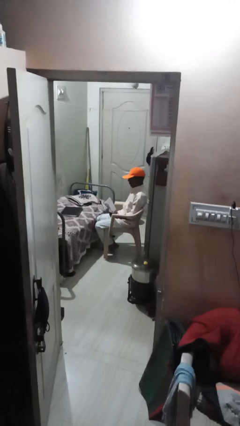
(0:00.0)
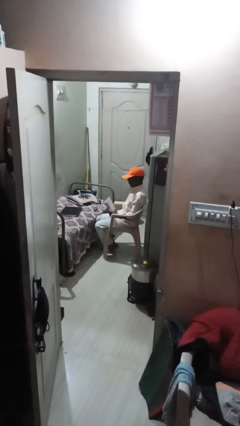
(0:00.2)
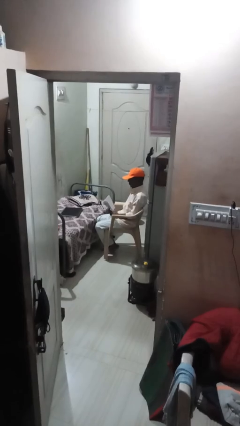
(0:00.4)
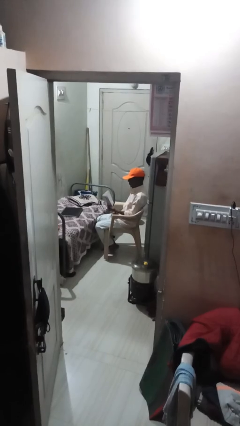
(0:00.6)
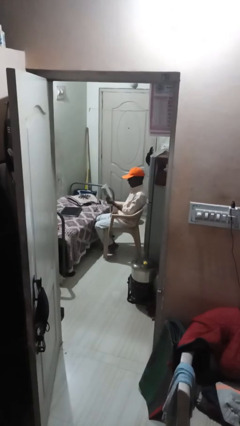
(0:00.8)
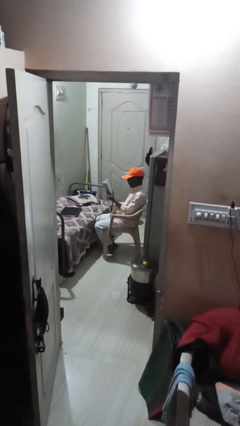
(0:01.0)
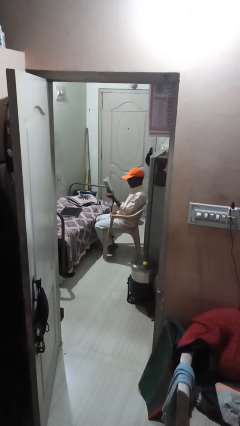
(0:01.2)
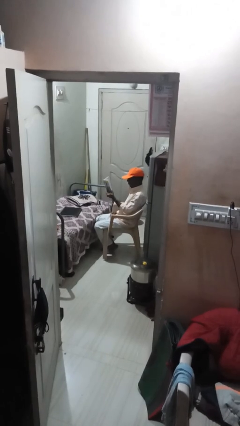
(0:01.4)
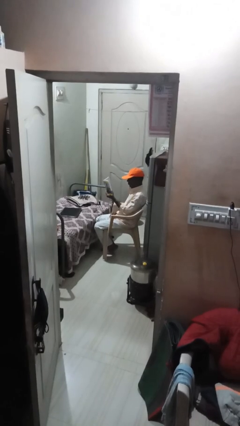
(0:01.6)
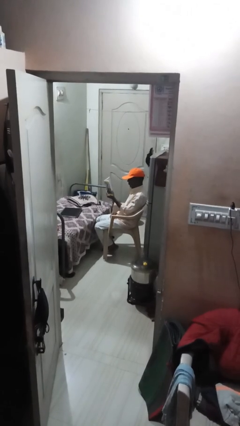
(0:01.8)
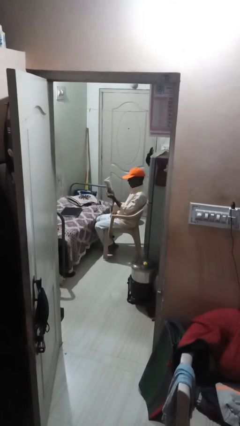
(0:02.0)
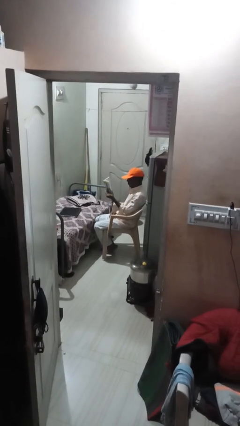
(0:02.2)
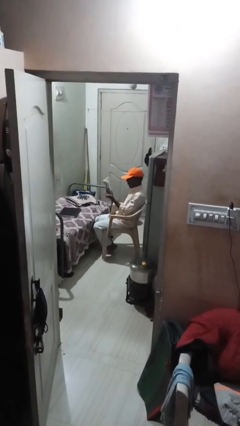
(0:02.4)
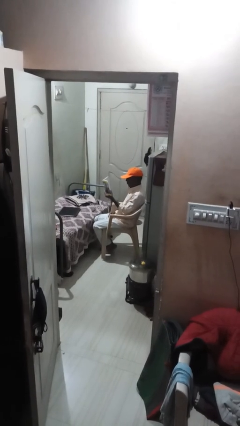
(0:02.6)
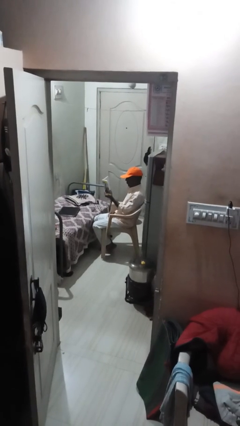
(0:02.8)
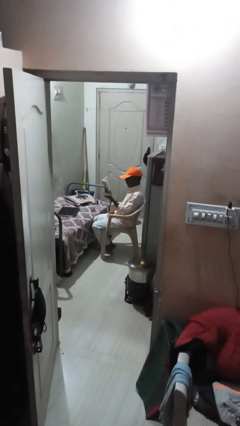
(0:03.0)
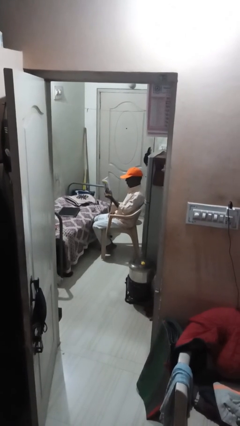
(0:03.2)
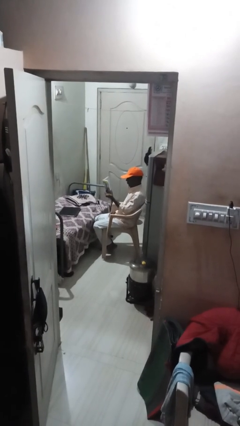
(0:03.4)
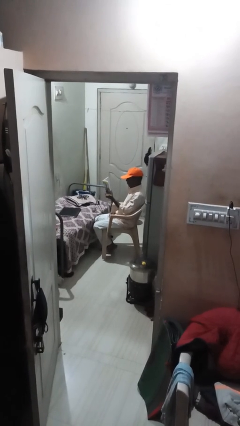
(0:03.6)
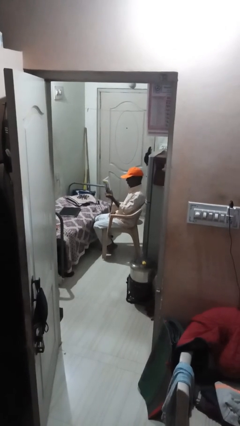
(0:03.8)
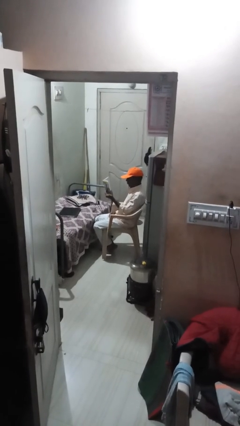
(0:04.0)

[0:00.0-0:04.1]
person reads document

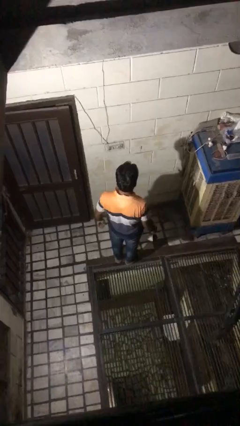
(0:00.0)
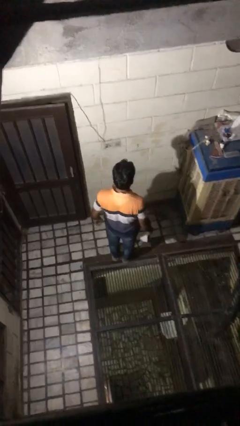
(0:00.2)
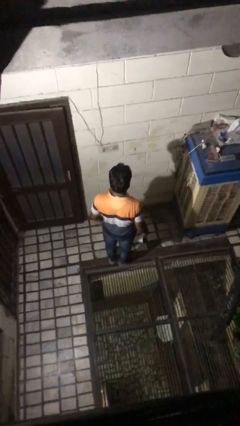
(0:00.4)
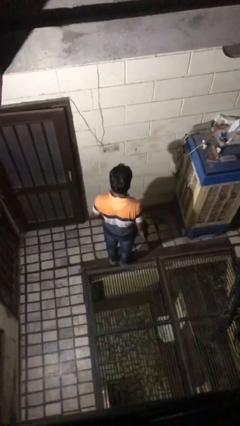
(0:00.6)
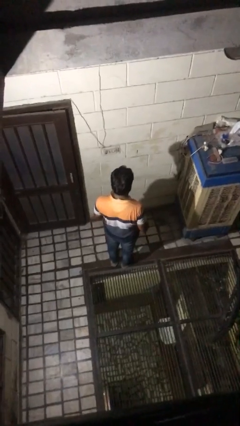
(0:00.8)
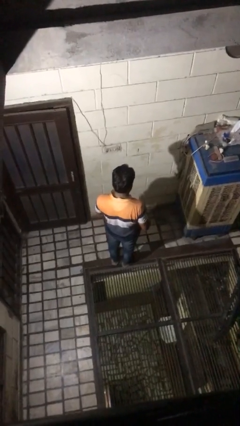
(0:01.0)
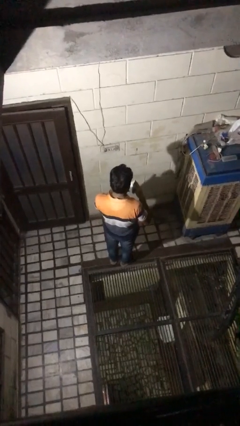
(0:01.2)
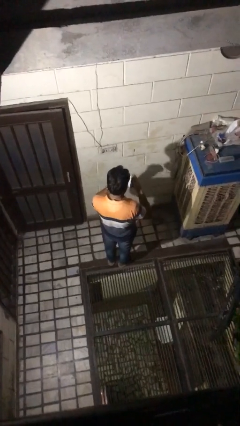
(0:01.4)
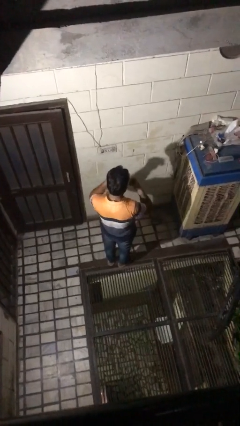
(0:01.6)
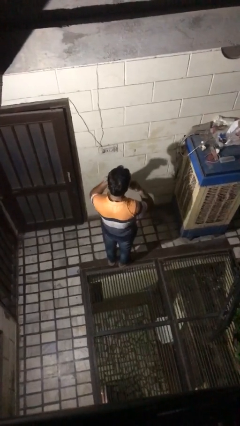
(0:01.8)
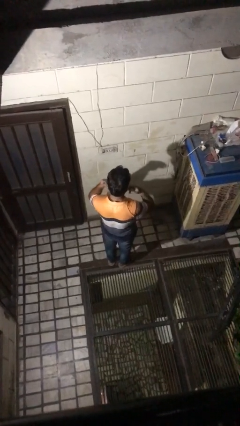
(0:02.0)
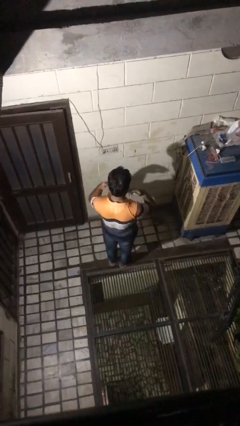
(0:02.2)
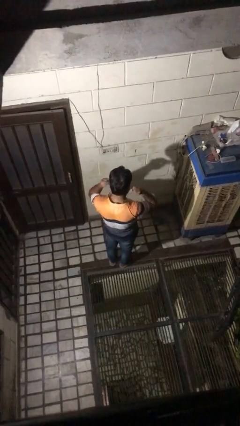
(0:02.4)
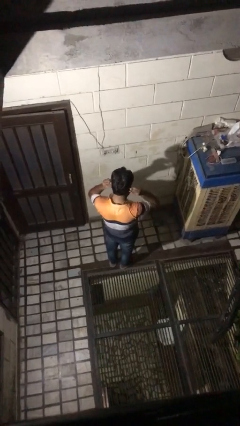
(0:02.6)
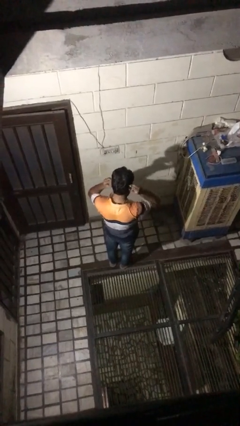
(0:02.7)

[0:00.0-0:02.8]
person puts on facemask

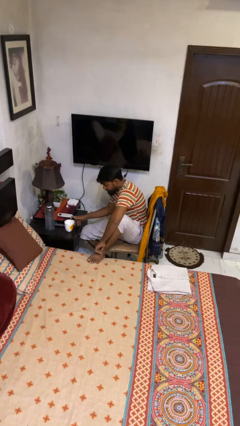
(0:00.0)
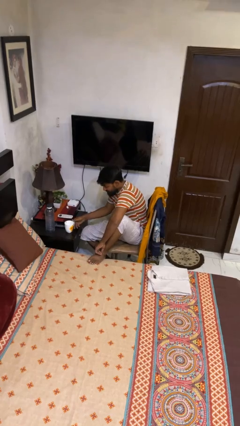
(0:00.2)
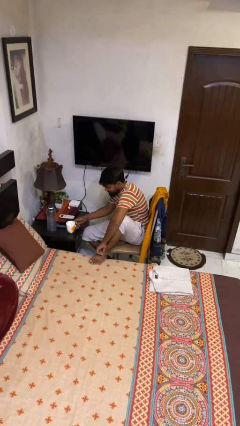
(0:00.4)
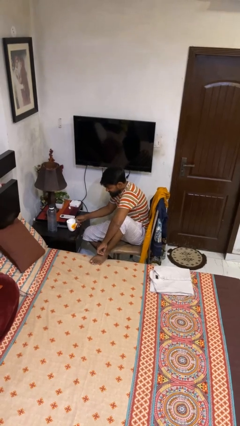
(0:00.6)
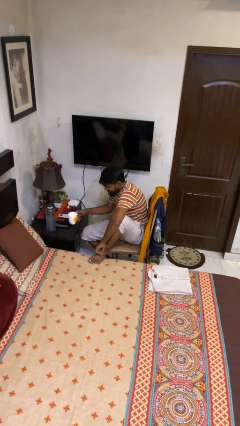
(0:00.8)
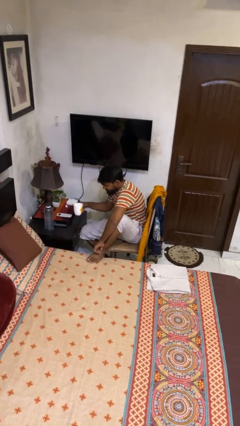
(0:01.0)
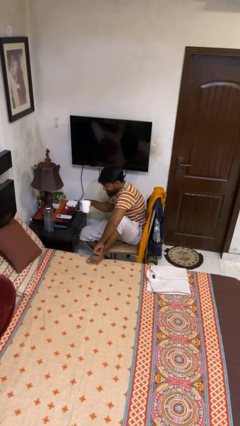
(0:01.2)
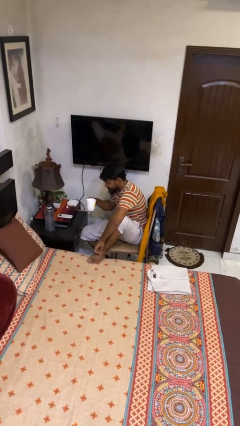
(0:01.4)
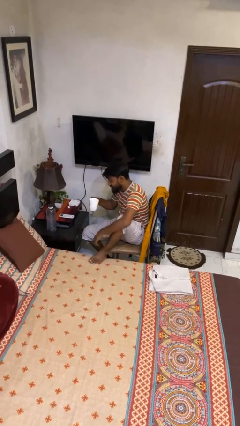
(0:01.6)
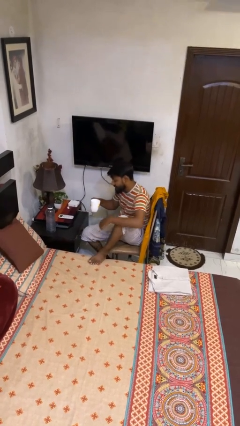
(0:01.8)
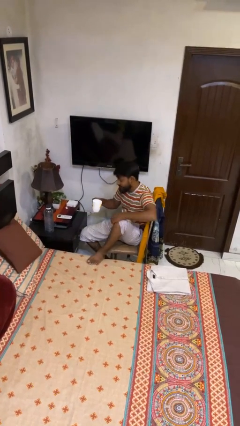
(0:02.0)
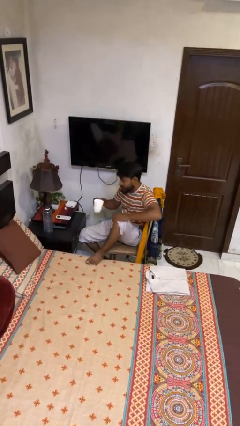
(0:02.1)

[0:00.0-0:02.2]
person picks up object from table

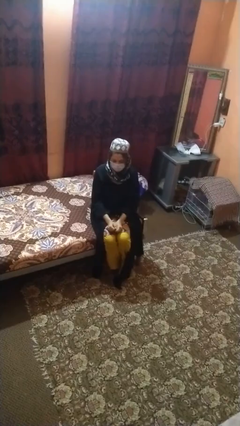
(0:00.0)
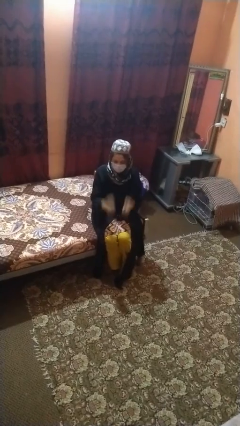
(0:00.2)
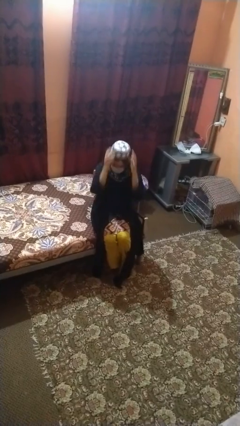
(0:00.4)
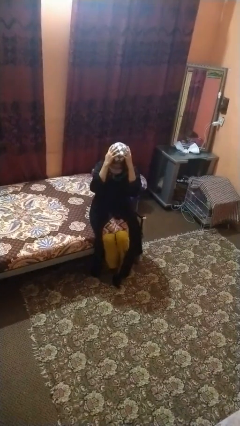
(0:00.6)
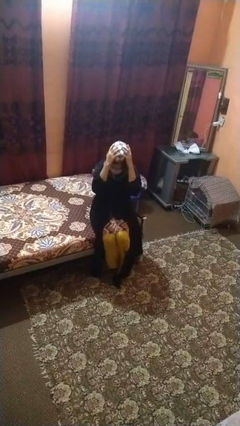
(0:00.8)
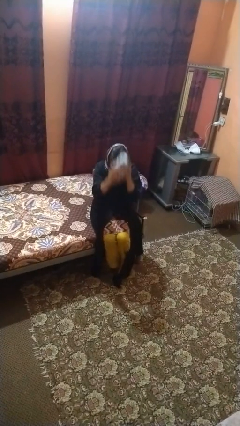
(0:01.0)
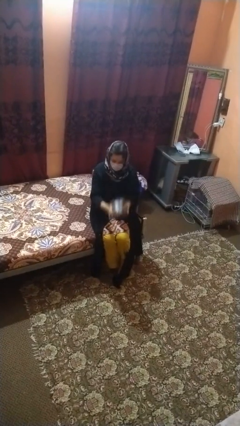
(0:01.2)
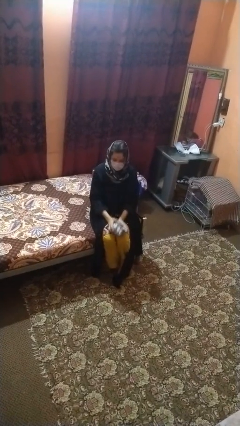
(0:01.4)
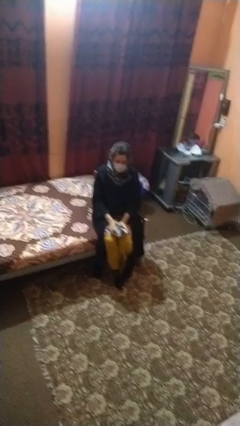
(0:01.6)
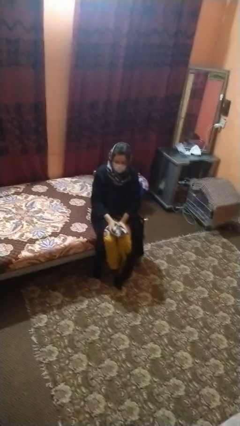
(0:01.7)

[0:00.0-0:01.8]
person takes off hat

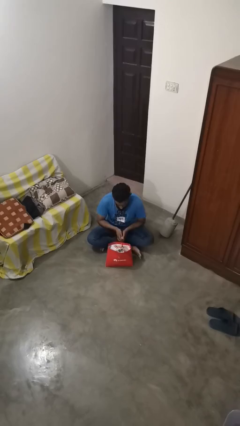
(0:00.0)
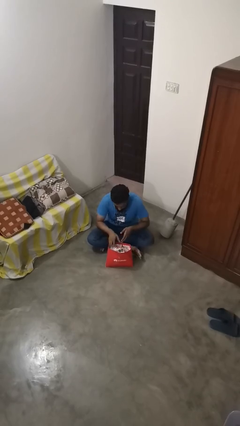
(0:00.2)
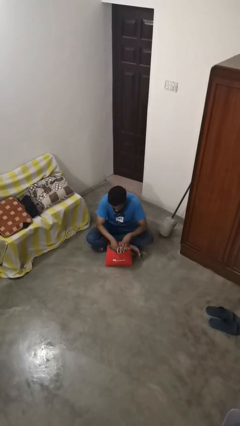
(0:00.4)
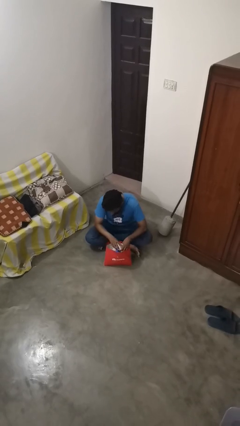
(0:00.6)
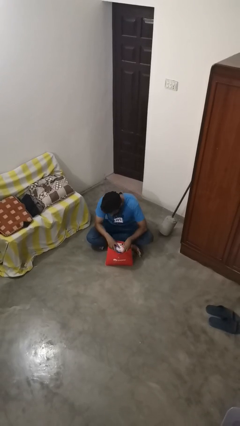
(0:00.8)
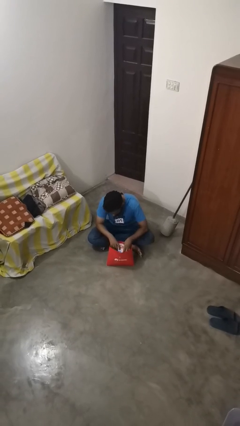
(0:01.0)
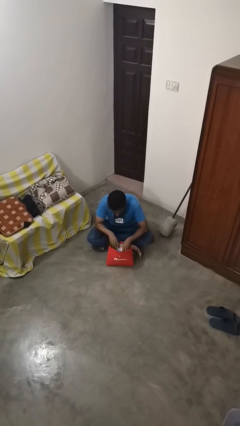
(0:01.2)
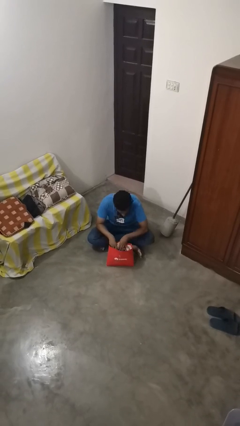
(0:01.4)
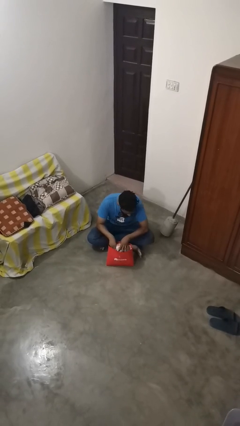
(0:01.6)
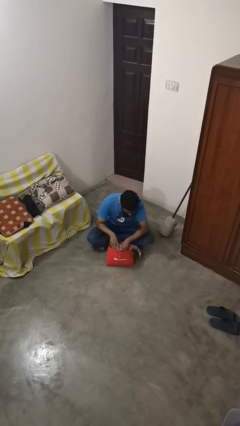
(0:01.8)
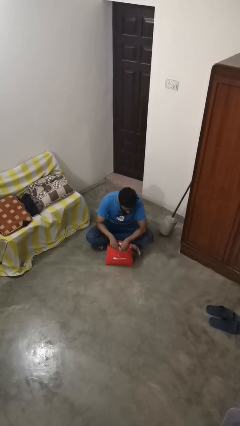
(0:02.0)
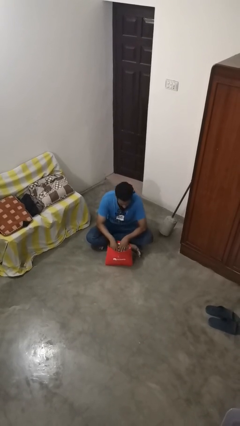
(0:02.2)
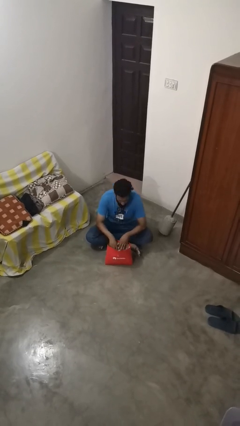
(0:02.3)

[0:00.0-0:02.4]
person searches in bag

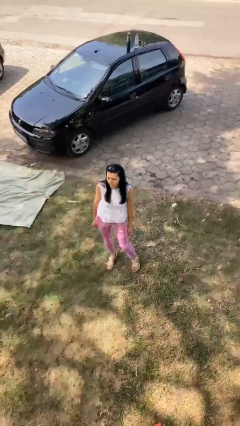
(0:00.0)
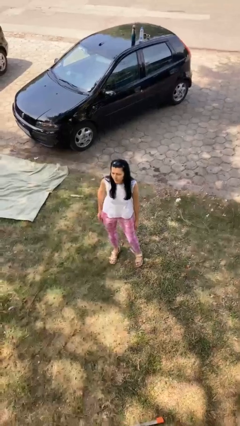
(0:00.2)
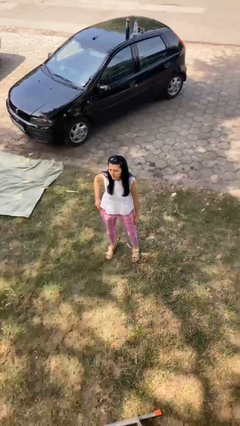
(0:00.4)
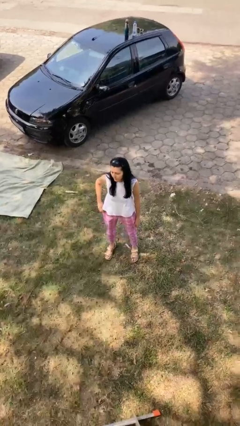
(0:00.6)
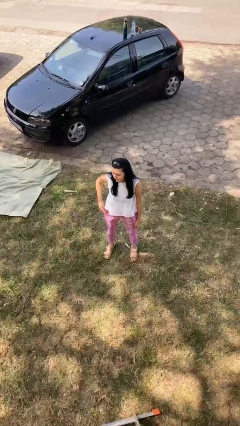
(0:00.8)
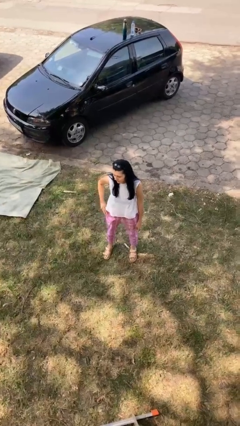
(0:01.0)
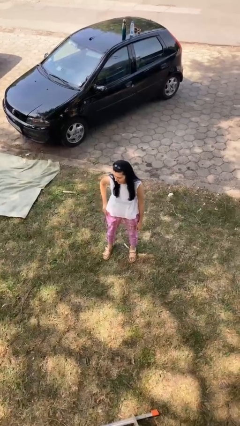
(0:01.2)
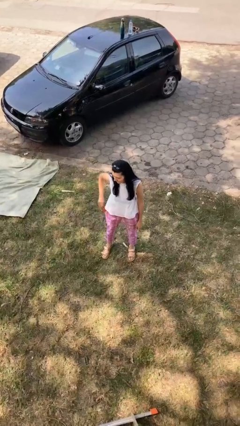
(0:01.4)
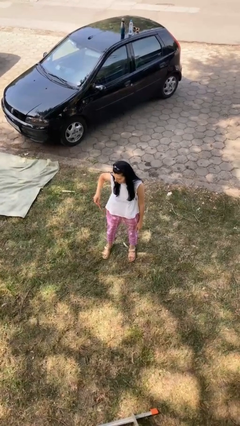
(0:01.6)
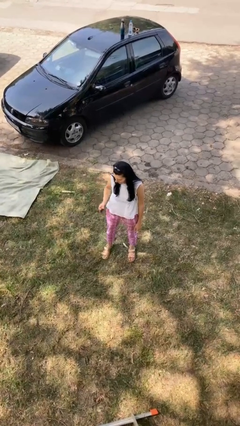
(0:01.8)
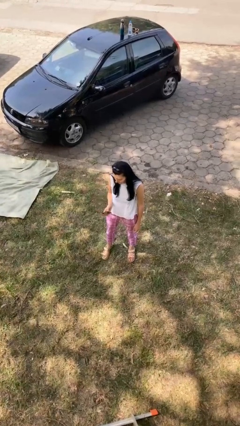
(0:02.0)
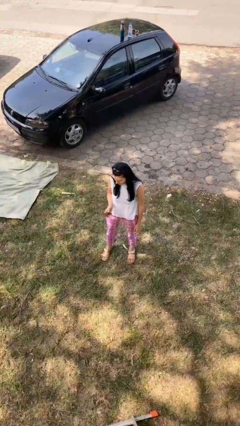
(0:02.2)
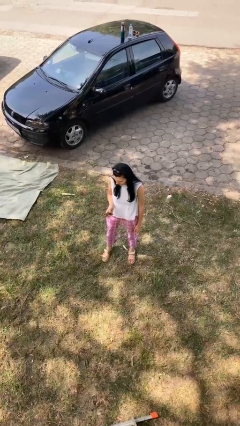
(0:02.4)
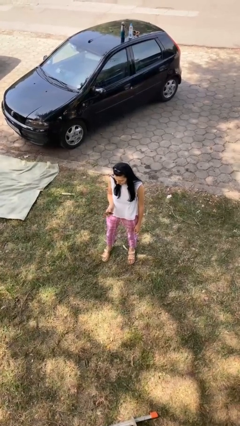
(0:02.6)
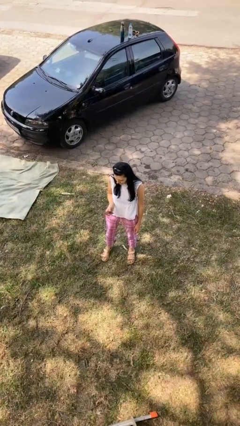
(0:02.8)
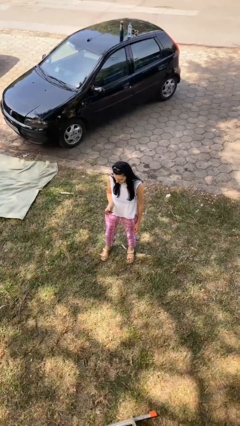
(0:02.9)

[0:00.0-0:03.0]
person takes phone from pocket

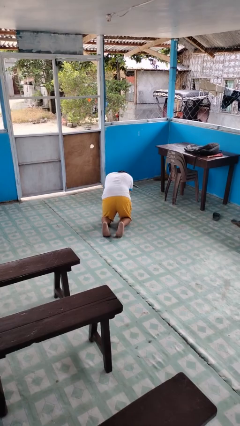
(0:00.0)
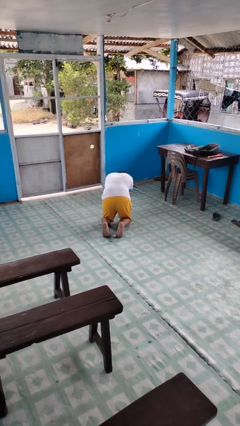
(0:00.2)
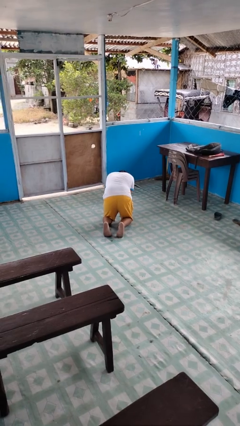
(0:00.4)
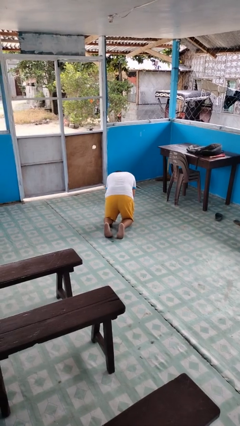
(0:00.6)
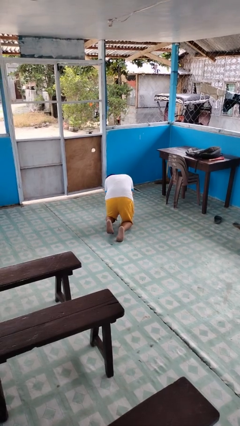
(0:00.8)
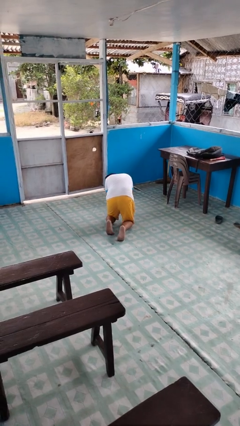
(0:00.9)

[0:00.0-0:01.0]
person crawls
